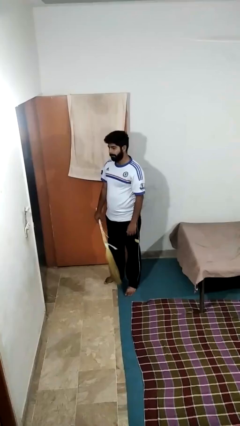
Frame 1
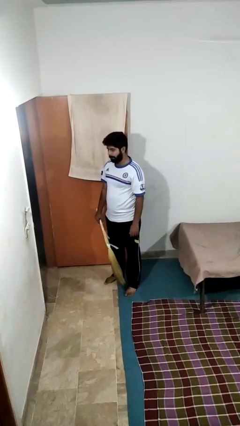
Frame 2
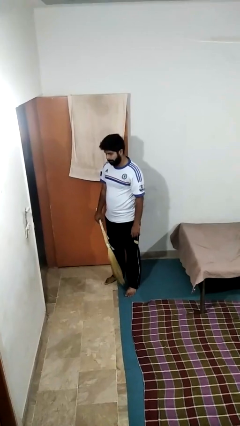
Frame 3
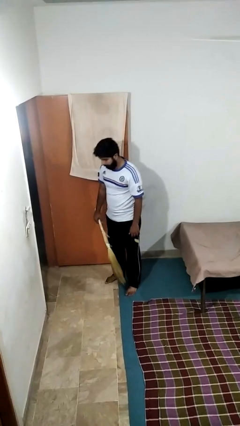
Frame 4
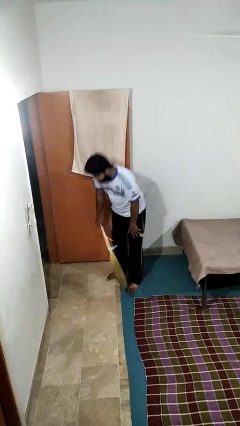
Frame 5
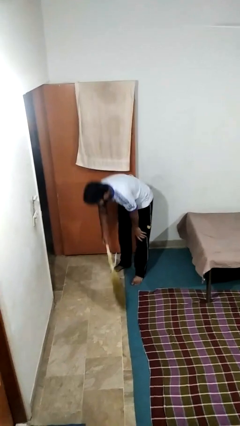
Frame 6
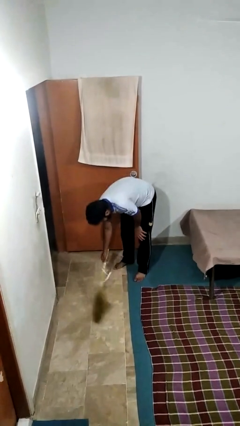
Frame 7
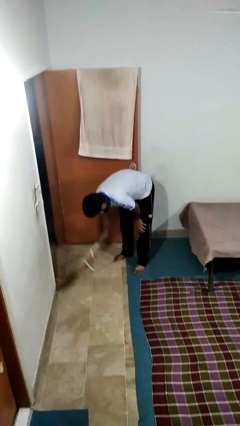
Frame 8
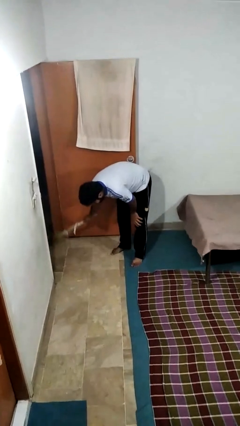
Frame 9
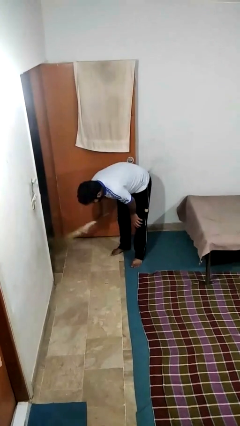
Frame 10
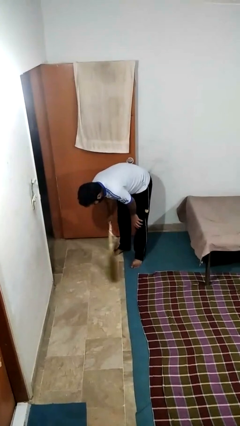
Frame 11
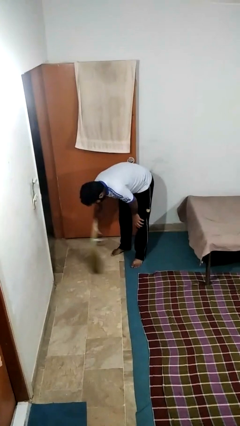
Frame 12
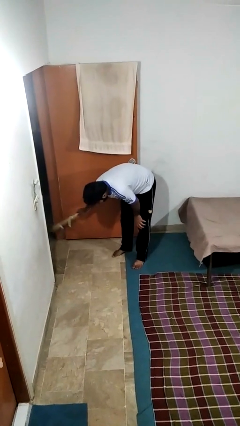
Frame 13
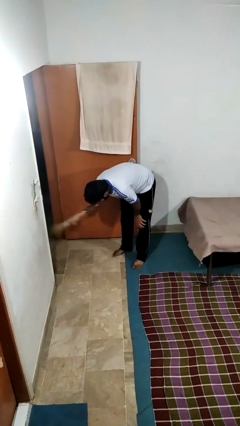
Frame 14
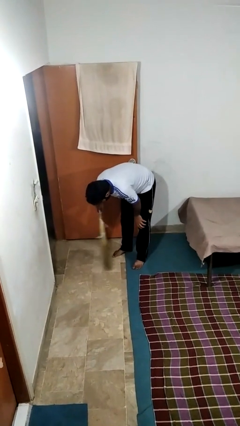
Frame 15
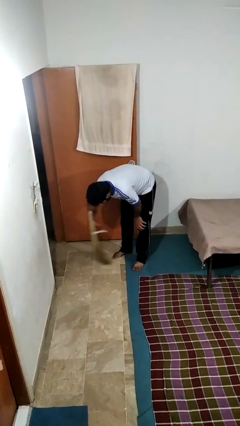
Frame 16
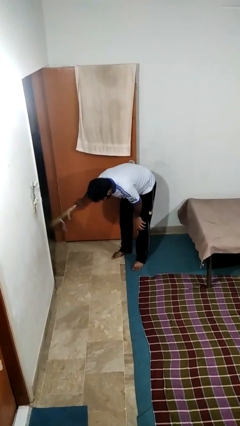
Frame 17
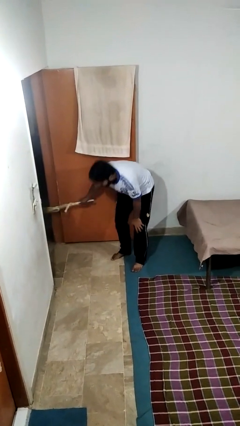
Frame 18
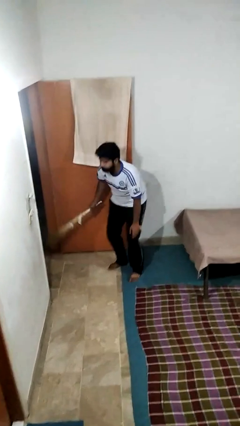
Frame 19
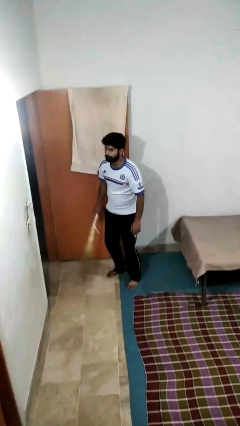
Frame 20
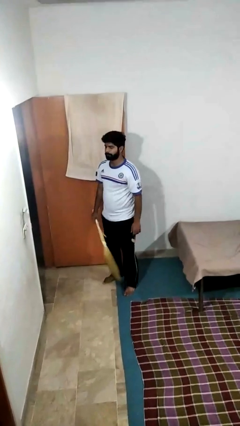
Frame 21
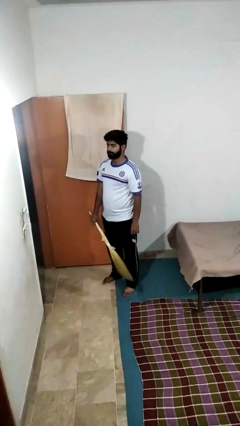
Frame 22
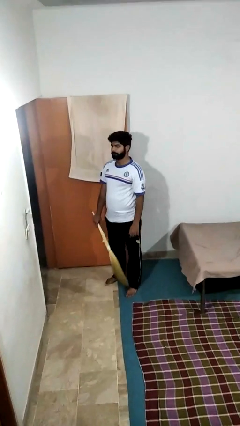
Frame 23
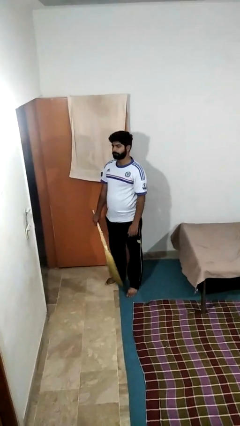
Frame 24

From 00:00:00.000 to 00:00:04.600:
person sweeps floor

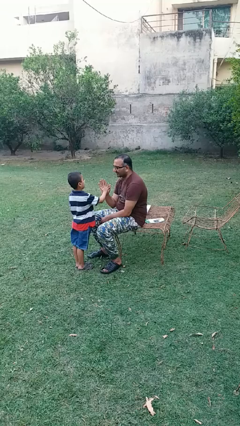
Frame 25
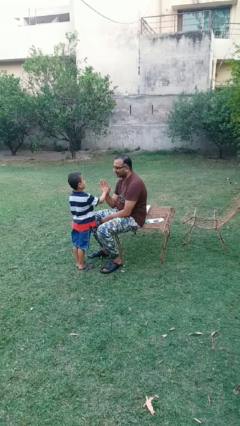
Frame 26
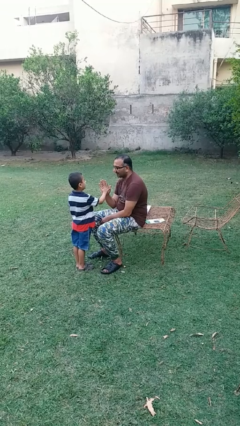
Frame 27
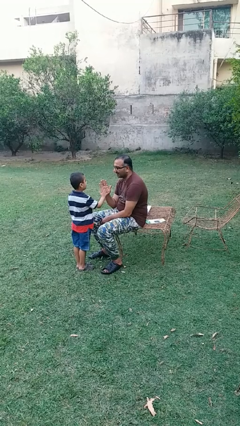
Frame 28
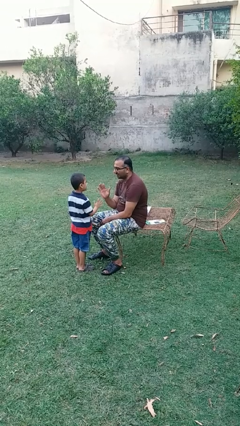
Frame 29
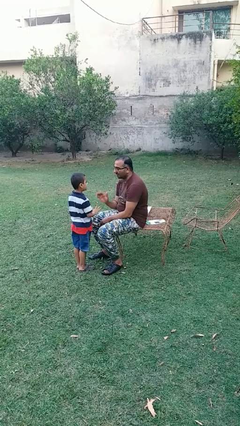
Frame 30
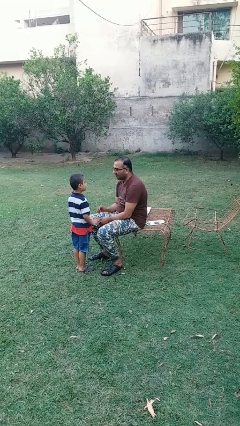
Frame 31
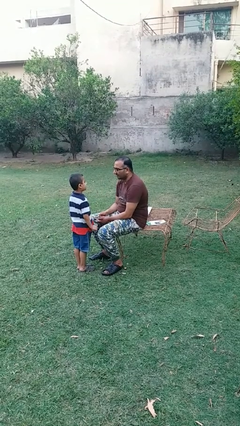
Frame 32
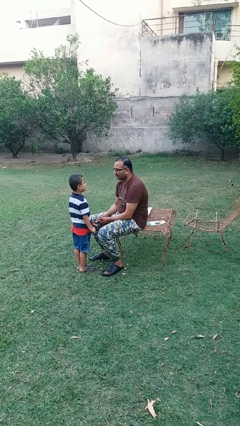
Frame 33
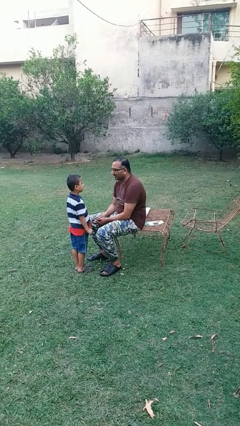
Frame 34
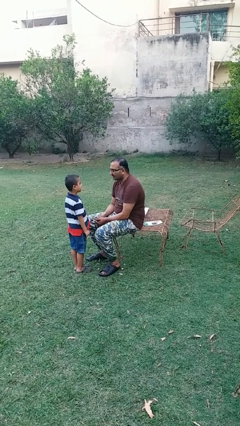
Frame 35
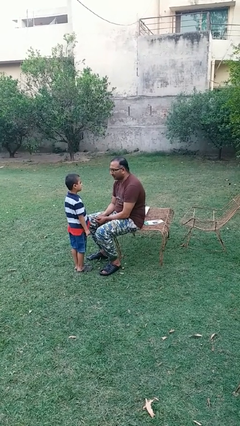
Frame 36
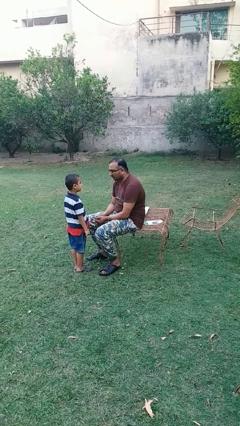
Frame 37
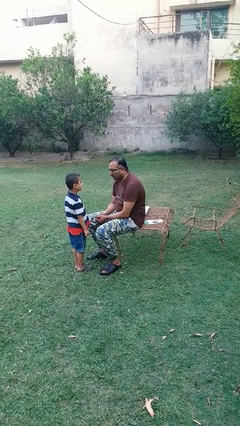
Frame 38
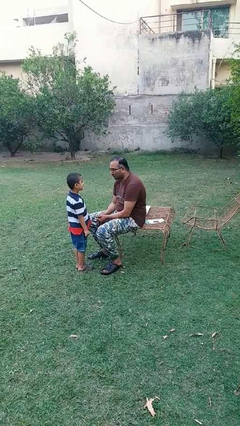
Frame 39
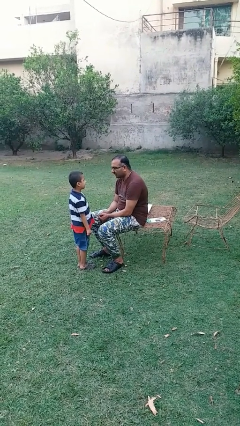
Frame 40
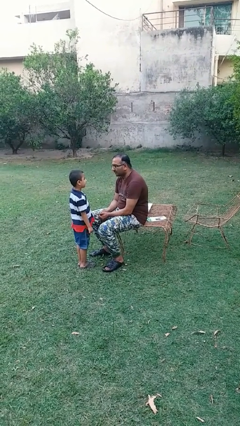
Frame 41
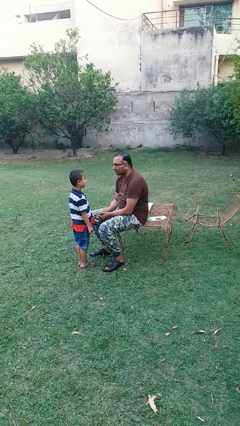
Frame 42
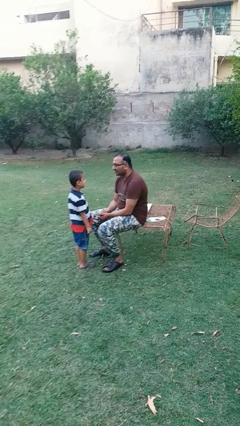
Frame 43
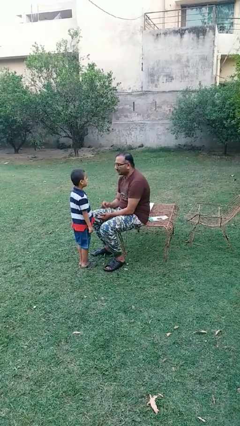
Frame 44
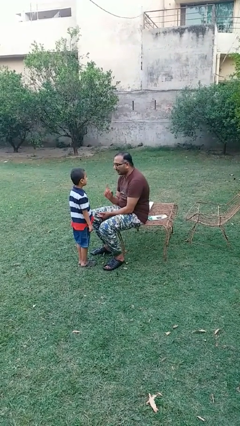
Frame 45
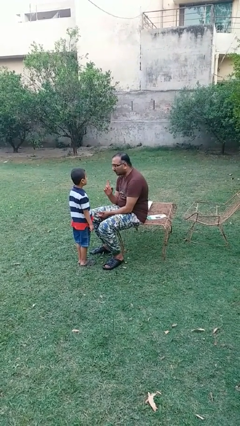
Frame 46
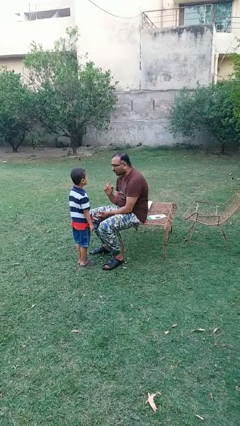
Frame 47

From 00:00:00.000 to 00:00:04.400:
person highfives hand

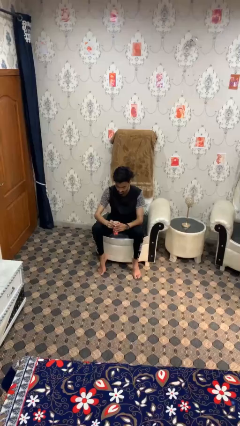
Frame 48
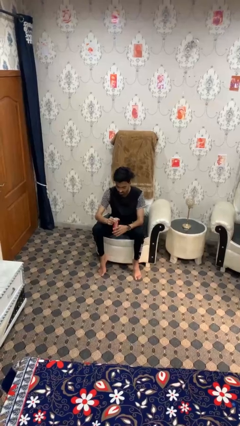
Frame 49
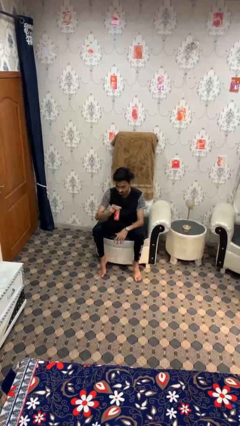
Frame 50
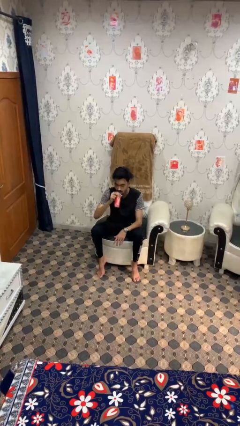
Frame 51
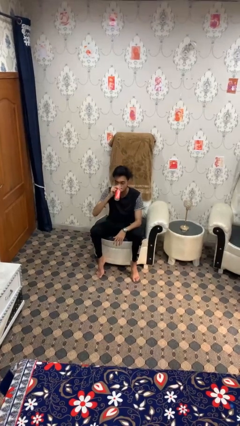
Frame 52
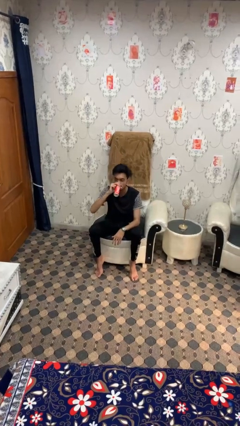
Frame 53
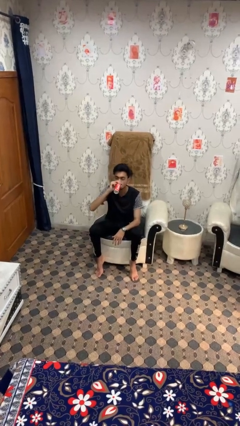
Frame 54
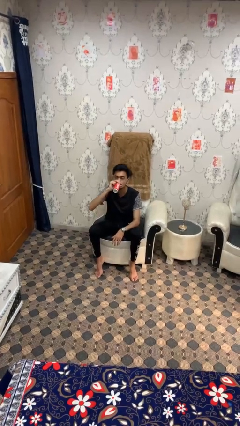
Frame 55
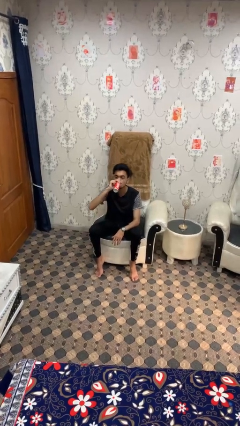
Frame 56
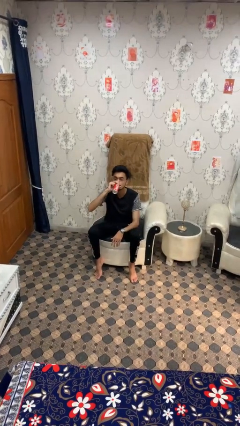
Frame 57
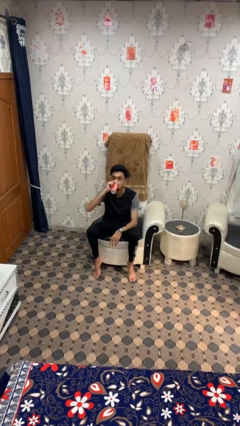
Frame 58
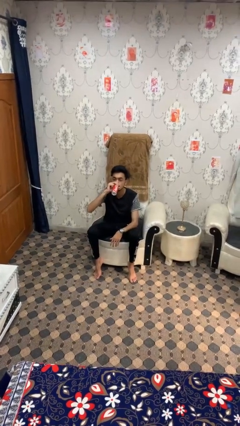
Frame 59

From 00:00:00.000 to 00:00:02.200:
person drinks from beverage can

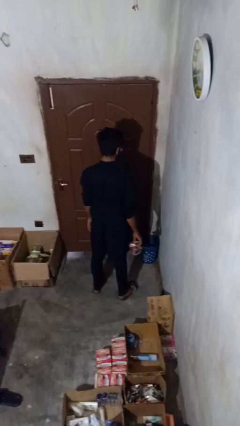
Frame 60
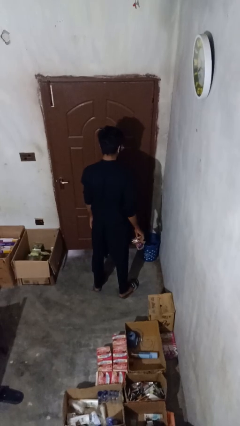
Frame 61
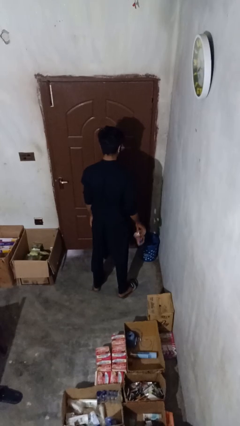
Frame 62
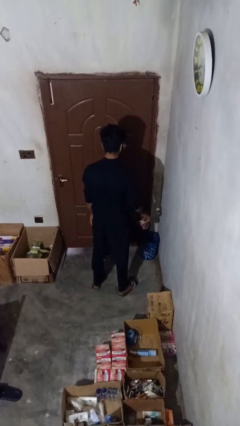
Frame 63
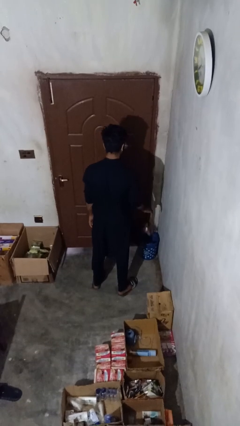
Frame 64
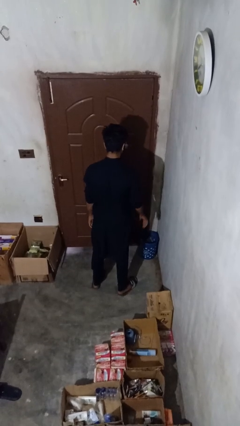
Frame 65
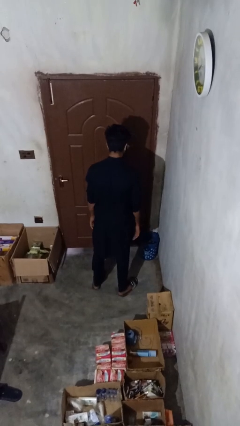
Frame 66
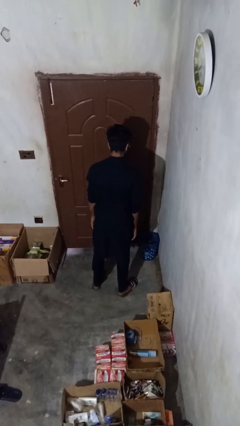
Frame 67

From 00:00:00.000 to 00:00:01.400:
person discards trash

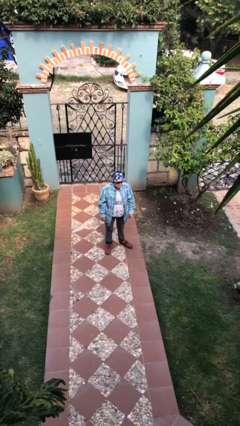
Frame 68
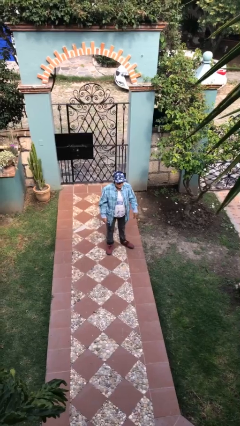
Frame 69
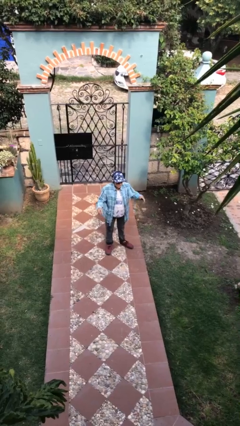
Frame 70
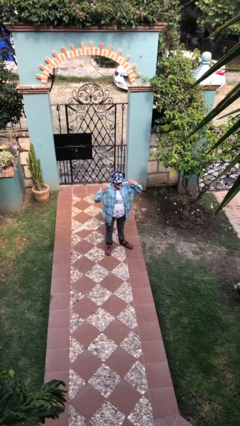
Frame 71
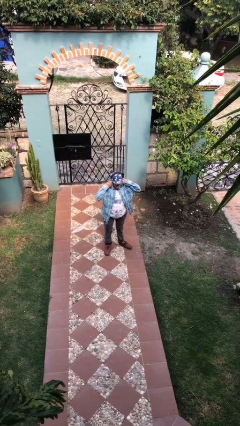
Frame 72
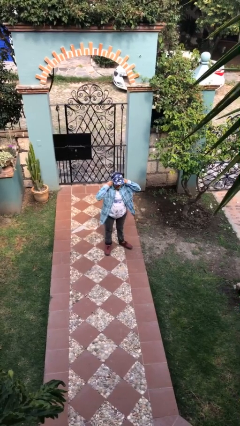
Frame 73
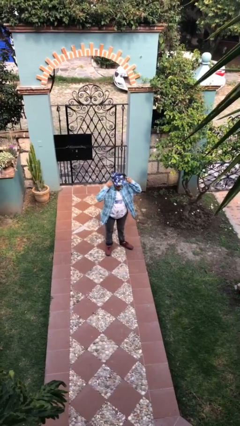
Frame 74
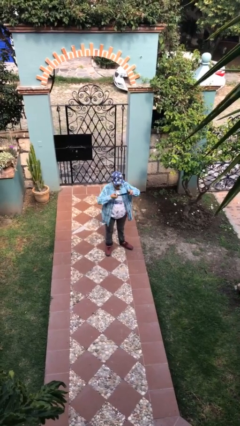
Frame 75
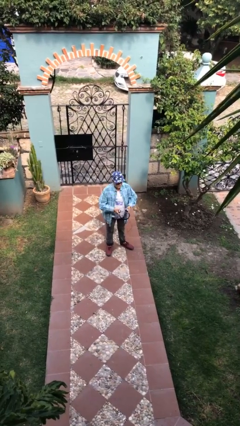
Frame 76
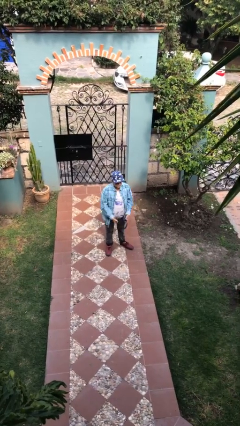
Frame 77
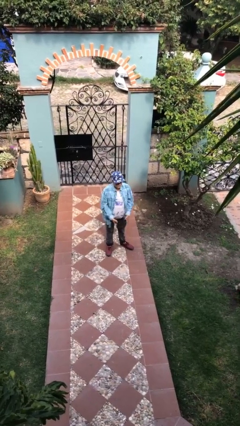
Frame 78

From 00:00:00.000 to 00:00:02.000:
person takes off headphones

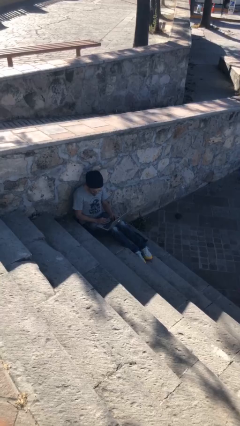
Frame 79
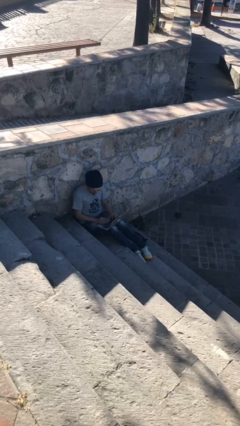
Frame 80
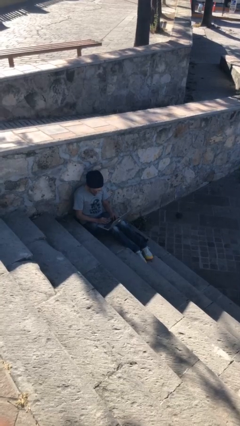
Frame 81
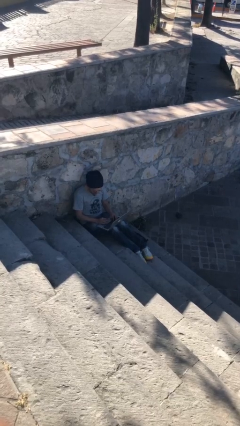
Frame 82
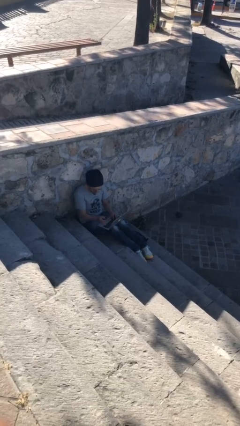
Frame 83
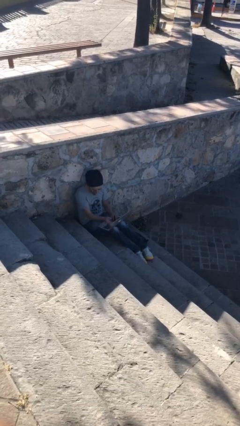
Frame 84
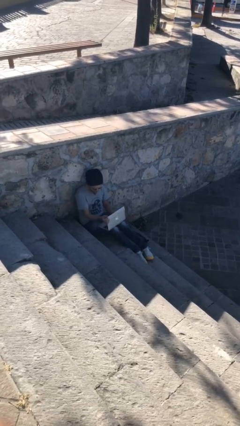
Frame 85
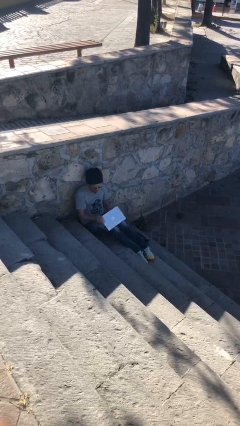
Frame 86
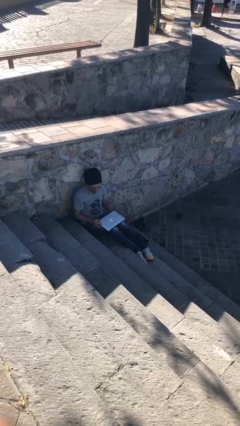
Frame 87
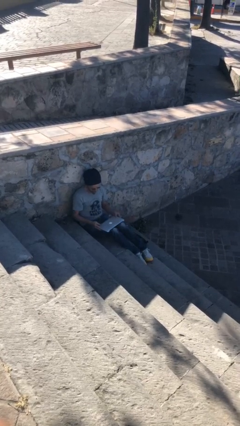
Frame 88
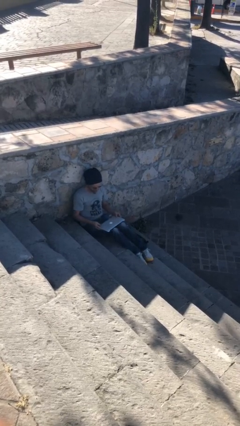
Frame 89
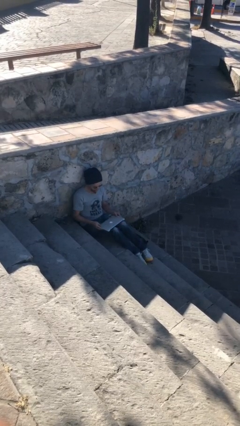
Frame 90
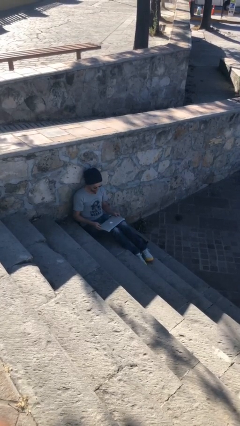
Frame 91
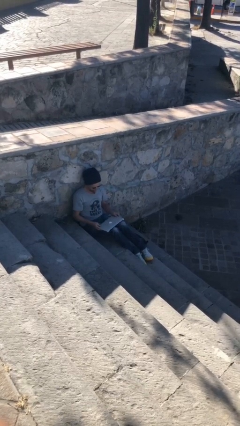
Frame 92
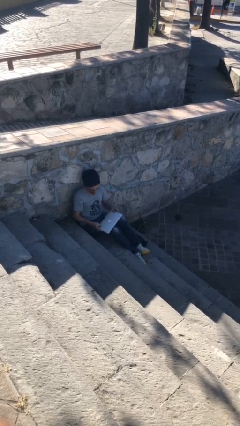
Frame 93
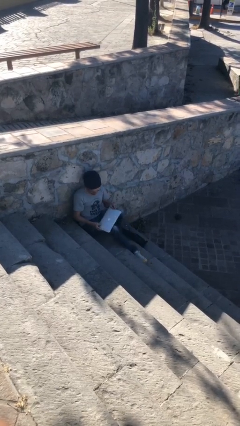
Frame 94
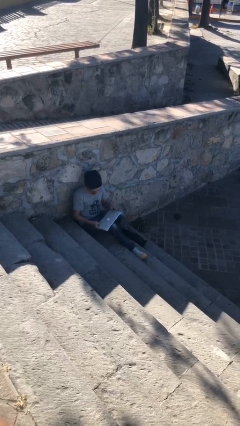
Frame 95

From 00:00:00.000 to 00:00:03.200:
person interacts with laptop
